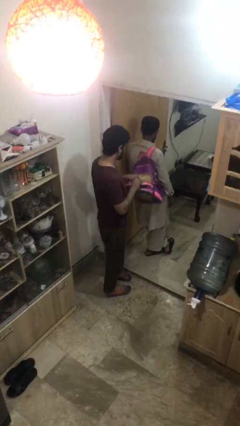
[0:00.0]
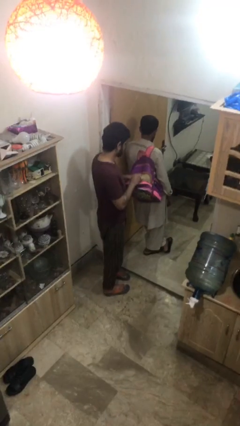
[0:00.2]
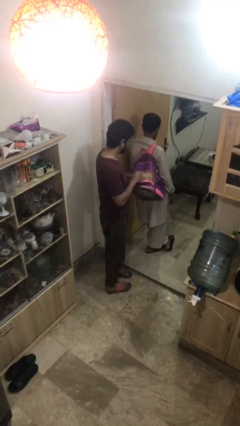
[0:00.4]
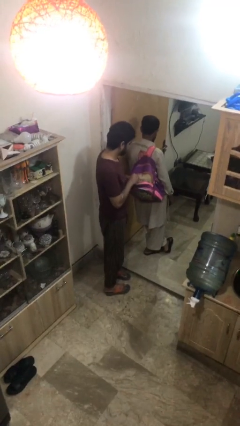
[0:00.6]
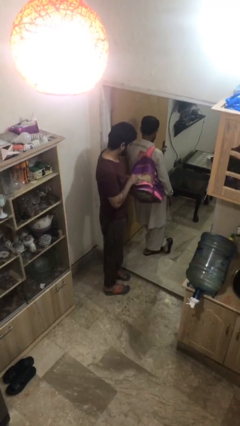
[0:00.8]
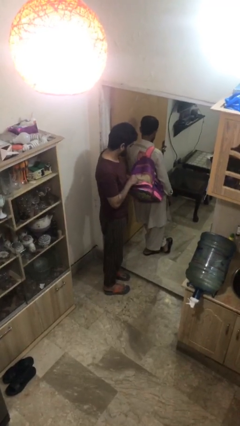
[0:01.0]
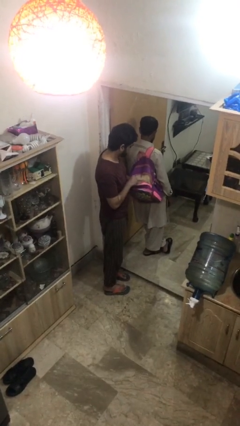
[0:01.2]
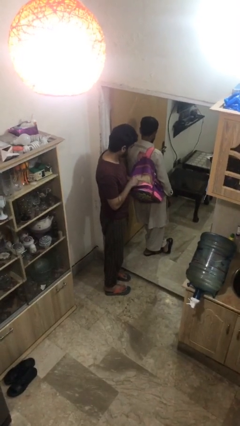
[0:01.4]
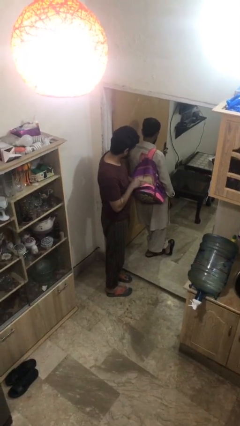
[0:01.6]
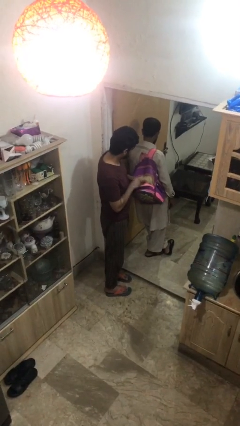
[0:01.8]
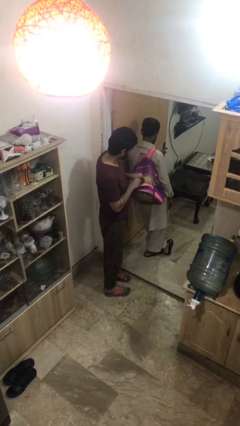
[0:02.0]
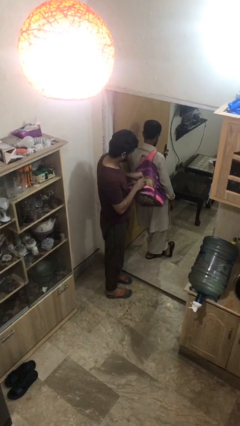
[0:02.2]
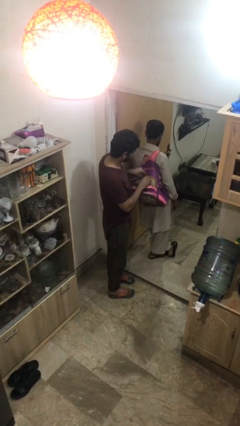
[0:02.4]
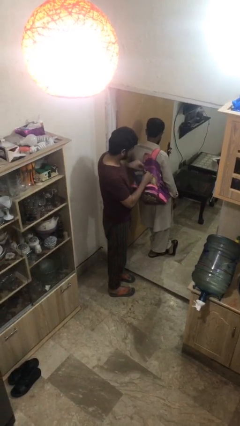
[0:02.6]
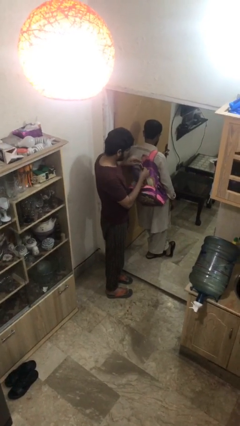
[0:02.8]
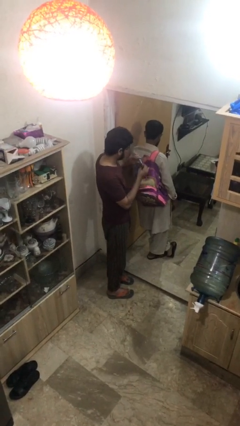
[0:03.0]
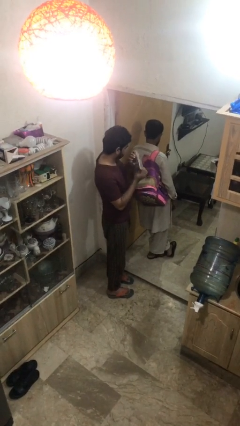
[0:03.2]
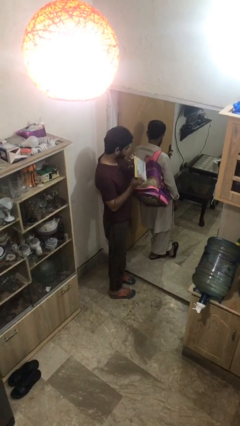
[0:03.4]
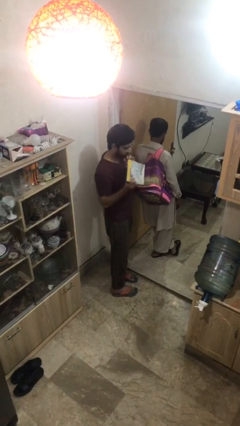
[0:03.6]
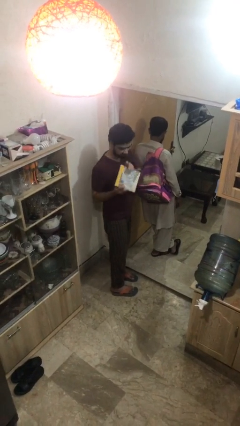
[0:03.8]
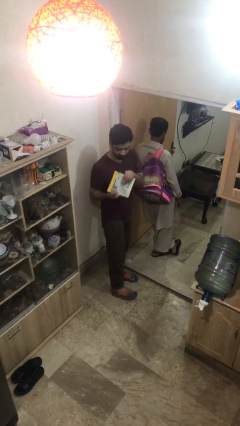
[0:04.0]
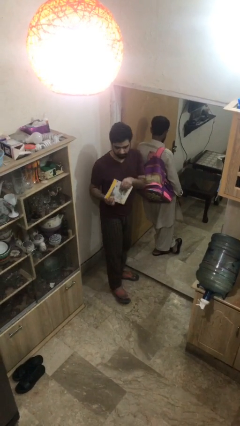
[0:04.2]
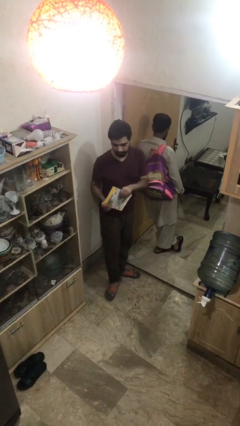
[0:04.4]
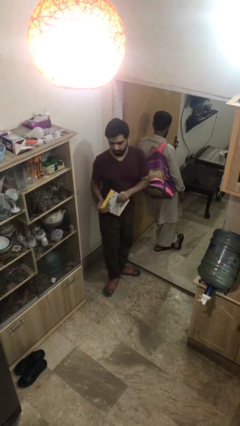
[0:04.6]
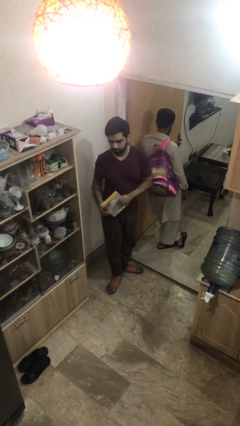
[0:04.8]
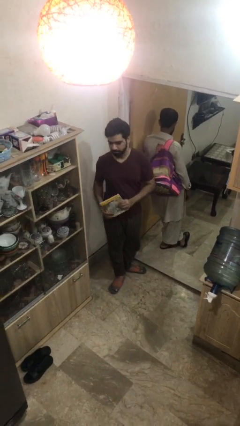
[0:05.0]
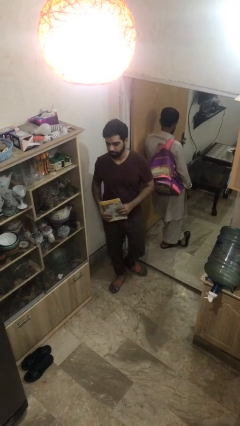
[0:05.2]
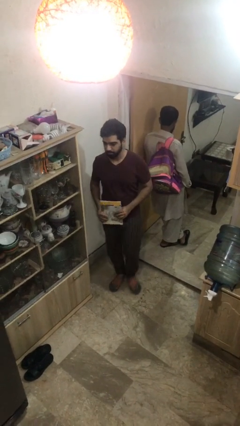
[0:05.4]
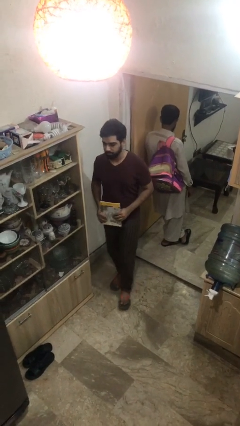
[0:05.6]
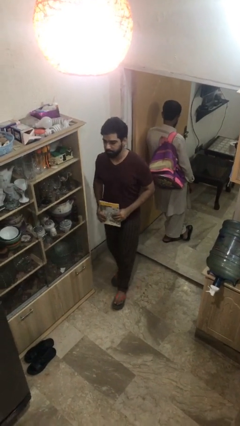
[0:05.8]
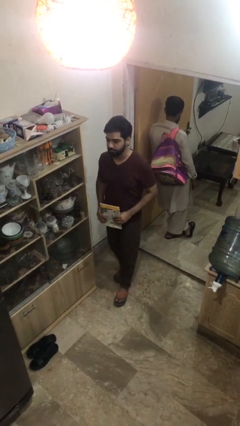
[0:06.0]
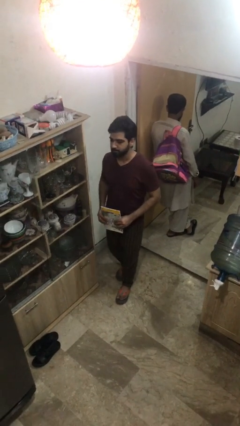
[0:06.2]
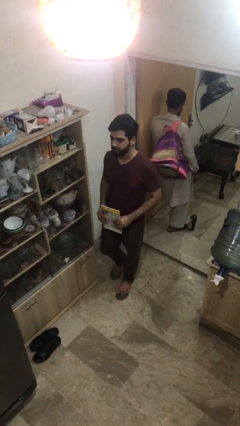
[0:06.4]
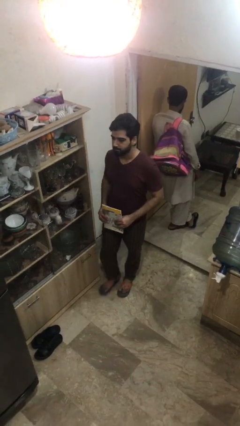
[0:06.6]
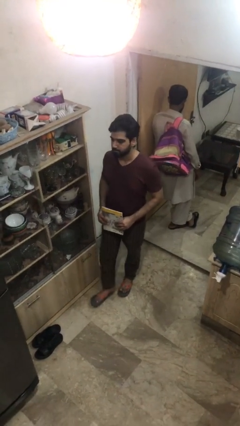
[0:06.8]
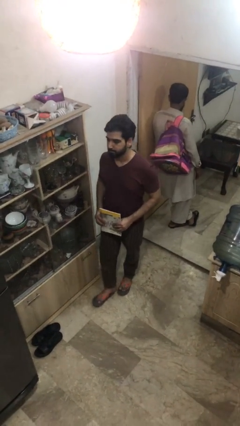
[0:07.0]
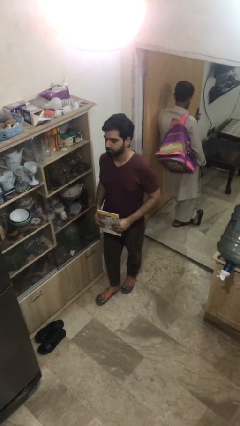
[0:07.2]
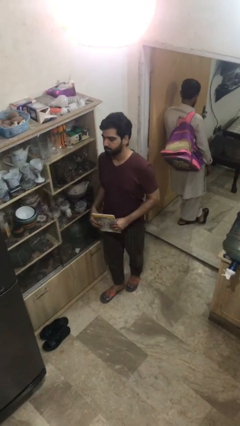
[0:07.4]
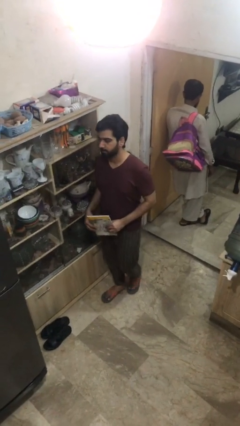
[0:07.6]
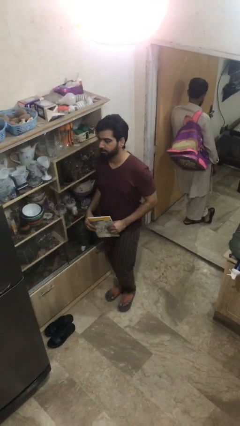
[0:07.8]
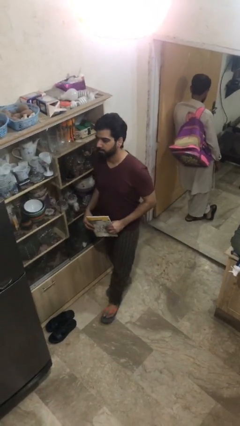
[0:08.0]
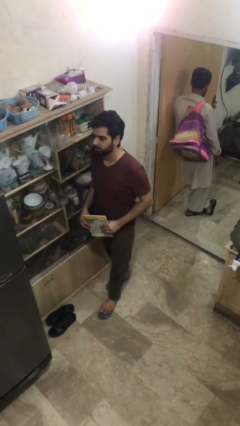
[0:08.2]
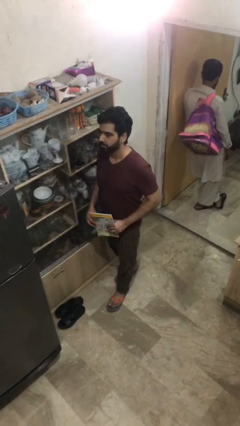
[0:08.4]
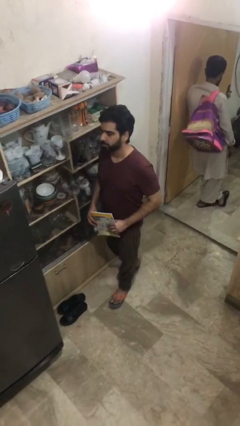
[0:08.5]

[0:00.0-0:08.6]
person steals object from person

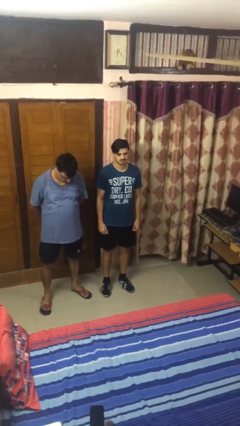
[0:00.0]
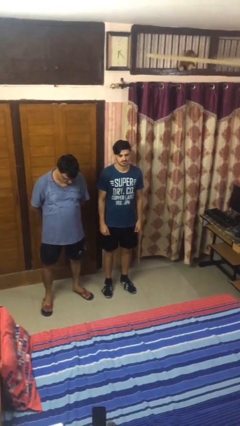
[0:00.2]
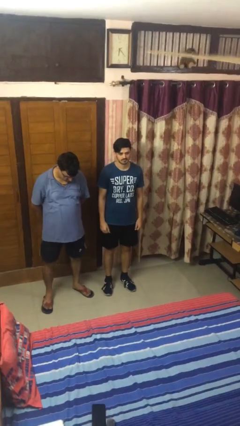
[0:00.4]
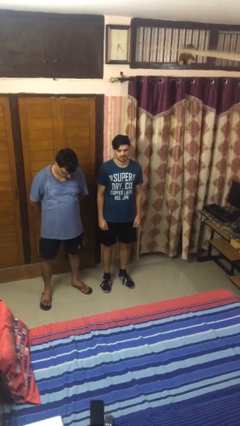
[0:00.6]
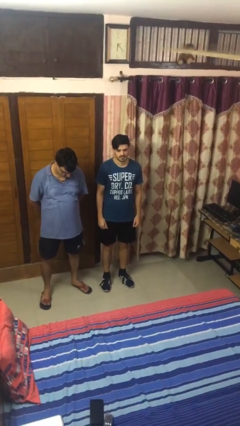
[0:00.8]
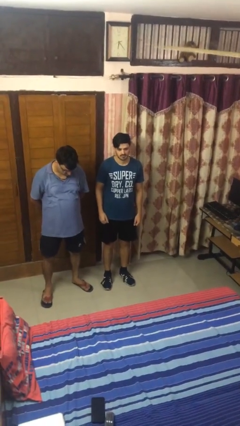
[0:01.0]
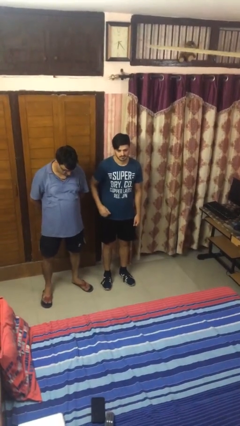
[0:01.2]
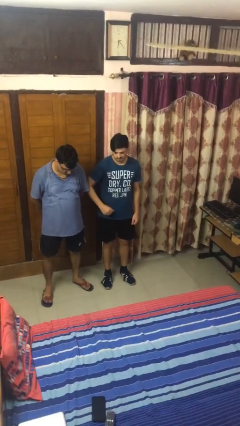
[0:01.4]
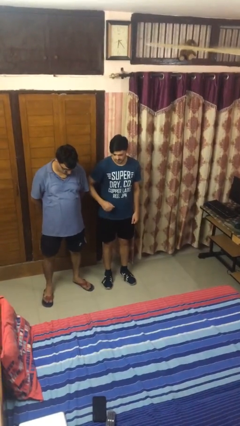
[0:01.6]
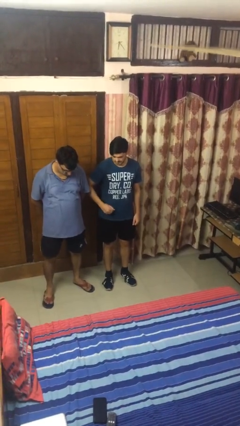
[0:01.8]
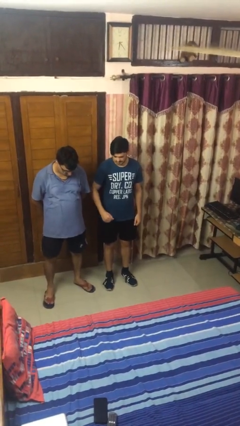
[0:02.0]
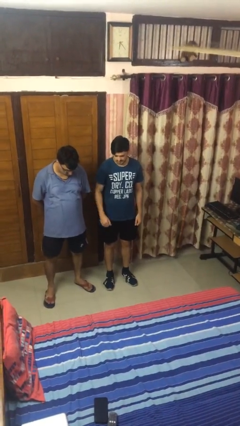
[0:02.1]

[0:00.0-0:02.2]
person nudges person with elbow

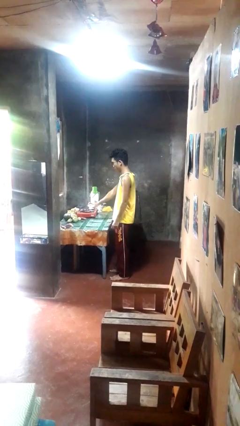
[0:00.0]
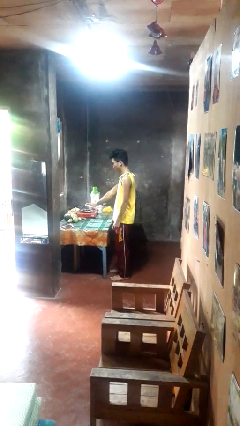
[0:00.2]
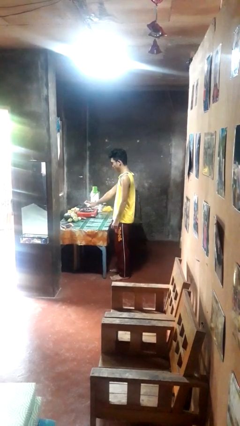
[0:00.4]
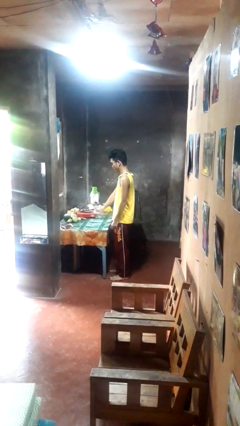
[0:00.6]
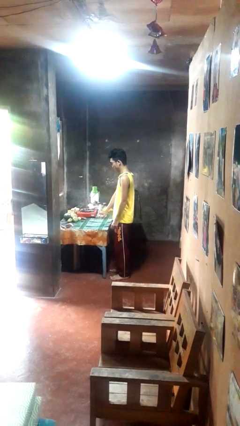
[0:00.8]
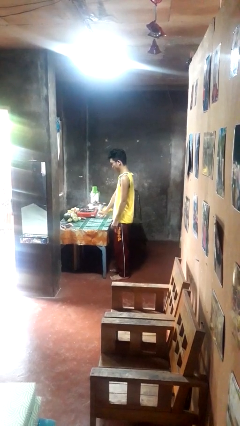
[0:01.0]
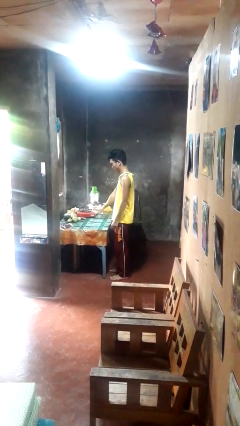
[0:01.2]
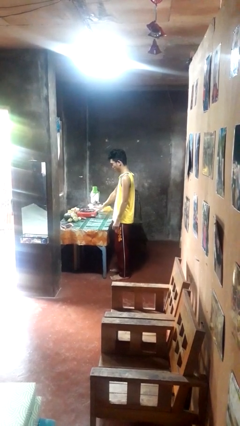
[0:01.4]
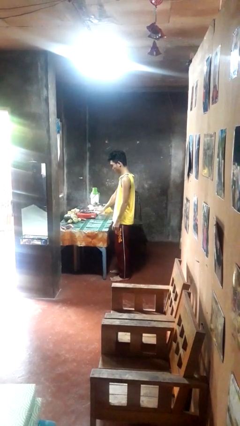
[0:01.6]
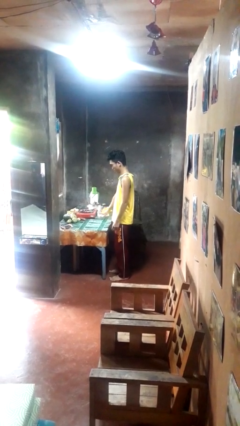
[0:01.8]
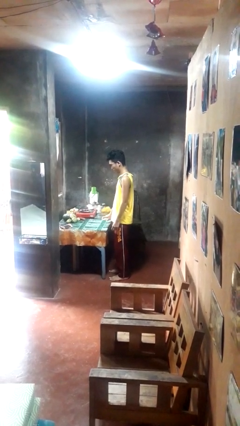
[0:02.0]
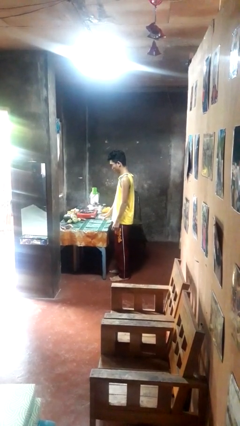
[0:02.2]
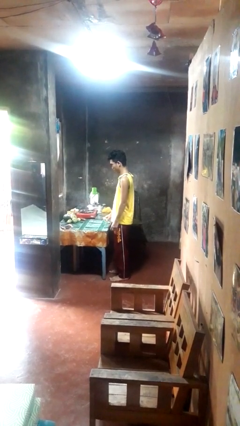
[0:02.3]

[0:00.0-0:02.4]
person sprays from bottle

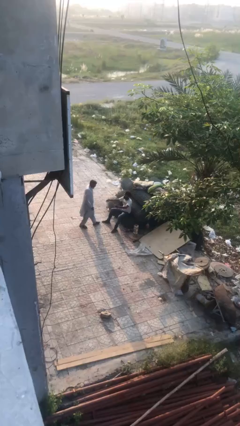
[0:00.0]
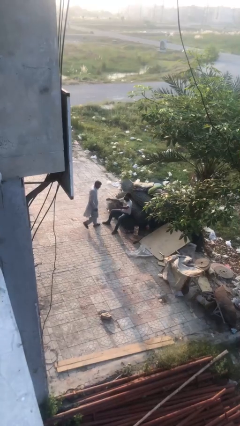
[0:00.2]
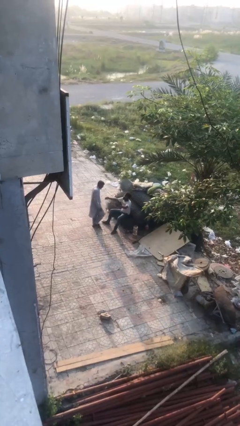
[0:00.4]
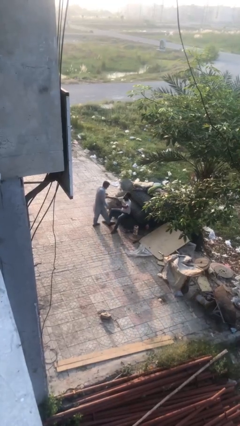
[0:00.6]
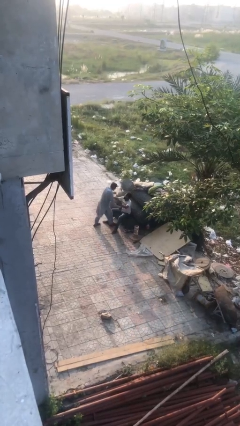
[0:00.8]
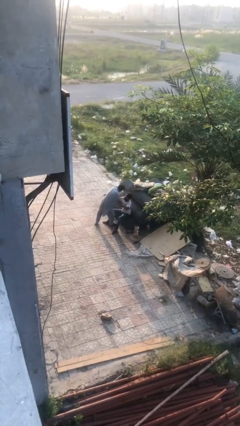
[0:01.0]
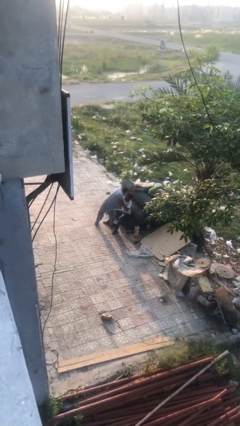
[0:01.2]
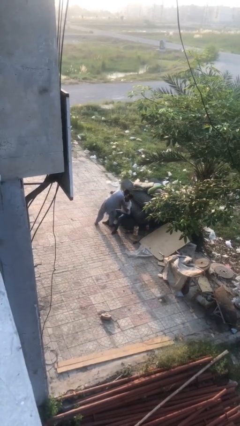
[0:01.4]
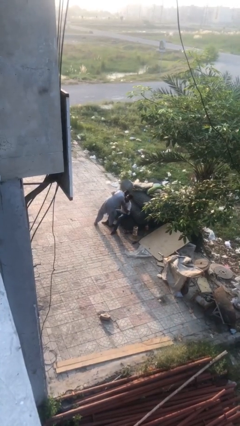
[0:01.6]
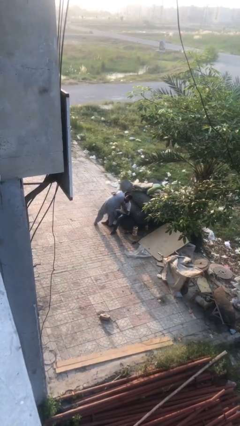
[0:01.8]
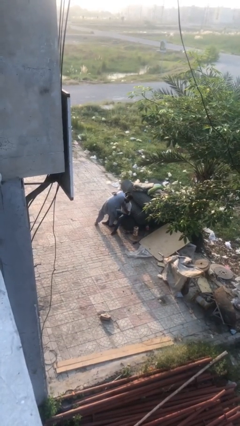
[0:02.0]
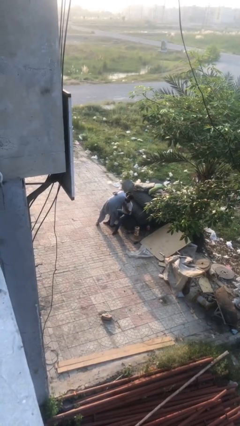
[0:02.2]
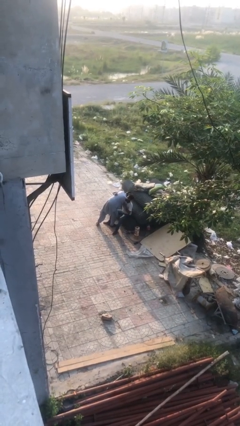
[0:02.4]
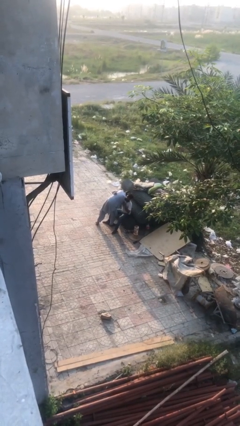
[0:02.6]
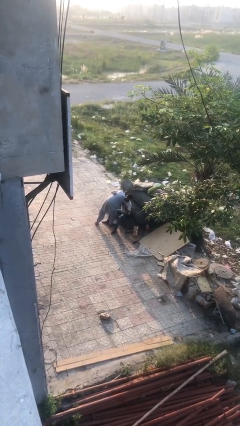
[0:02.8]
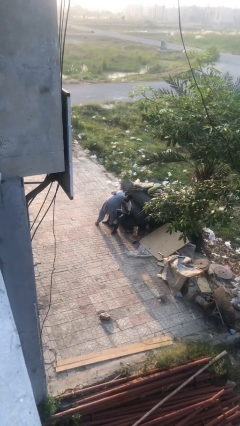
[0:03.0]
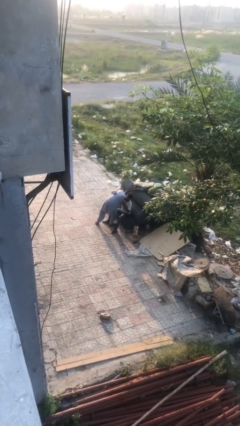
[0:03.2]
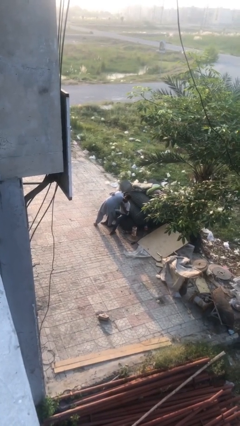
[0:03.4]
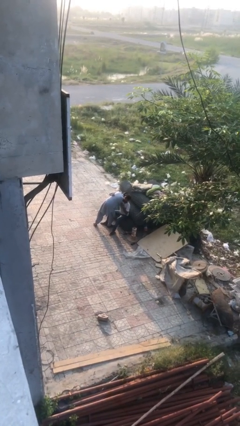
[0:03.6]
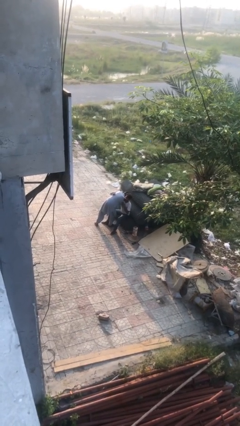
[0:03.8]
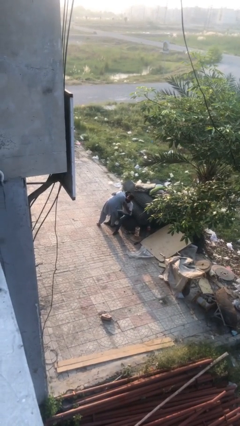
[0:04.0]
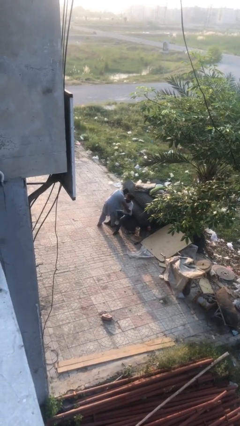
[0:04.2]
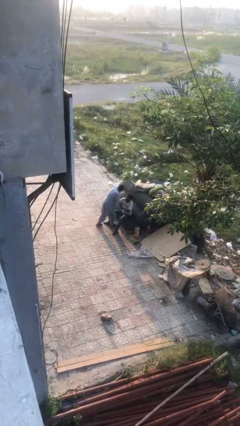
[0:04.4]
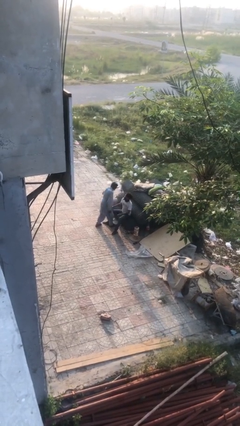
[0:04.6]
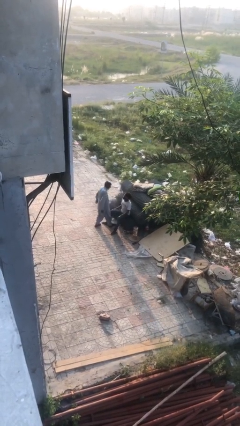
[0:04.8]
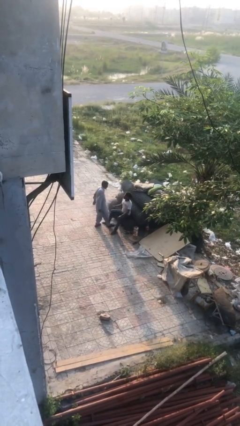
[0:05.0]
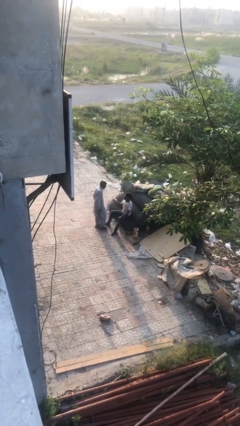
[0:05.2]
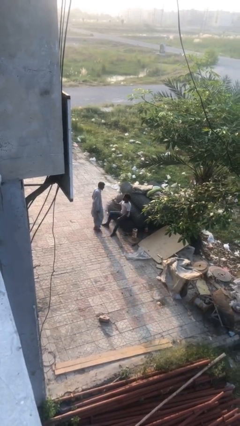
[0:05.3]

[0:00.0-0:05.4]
person embraces person
